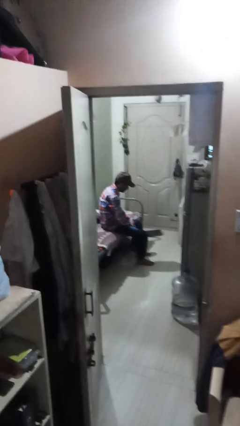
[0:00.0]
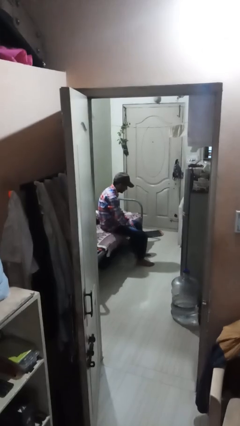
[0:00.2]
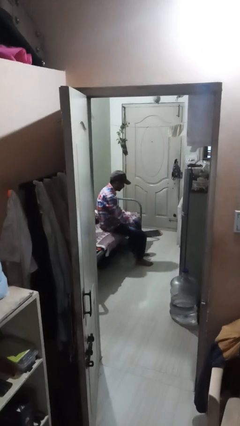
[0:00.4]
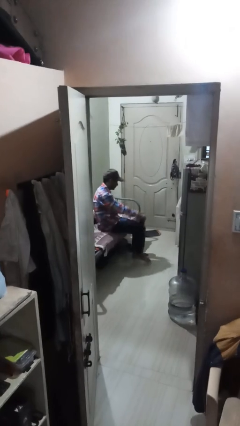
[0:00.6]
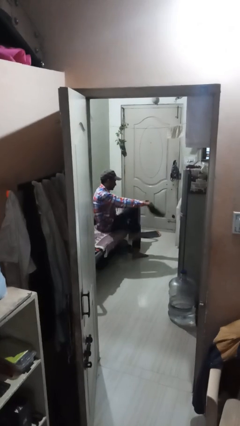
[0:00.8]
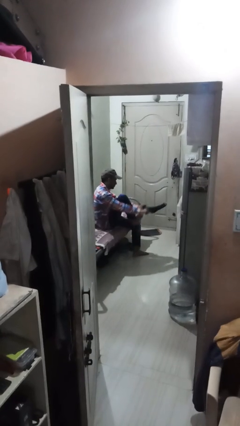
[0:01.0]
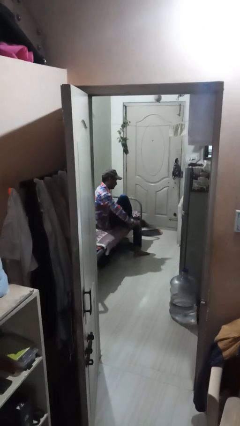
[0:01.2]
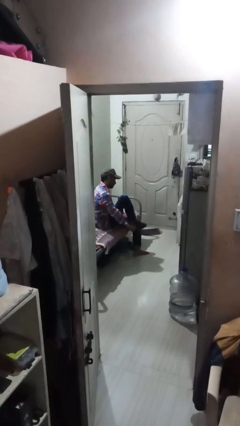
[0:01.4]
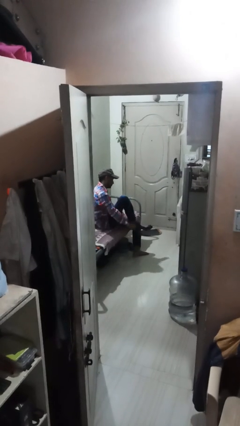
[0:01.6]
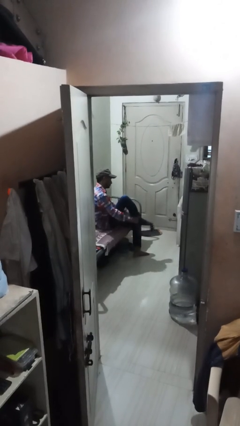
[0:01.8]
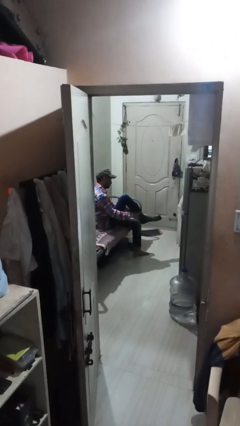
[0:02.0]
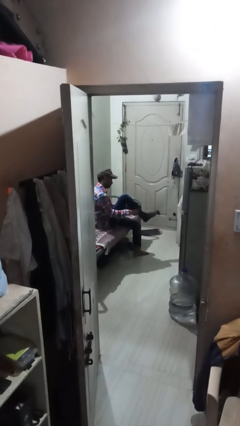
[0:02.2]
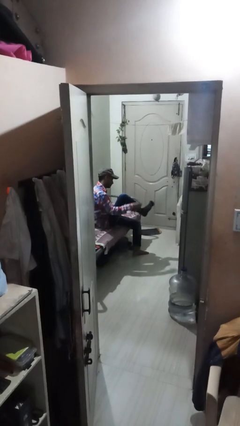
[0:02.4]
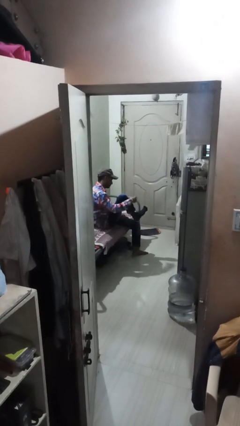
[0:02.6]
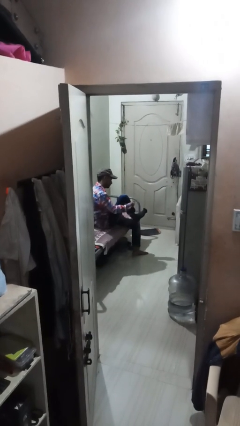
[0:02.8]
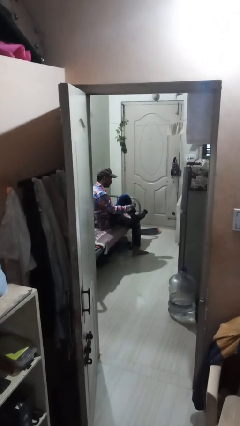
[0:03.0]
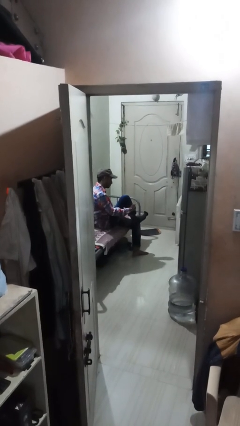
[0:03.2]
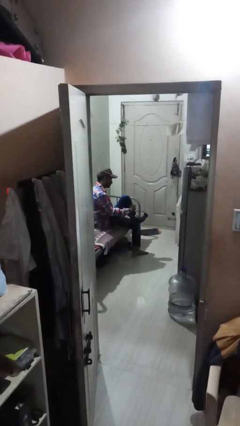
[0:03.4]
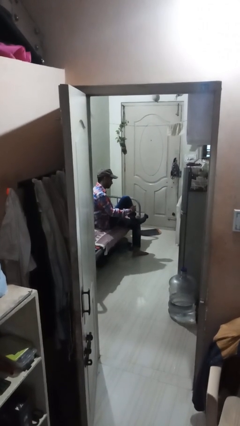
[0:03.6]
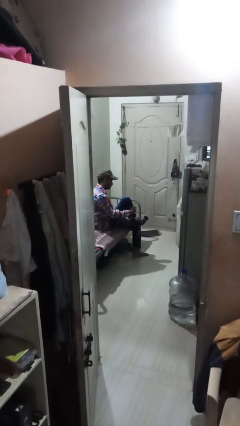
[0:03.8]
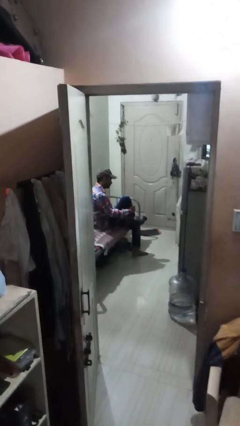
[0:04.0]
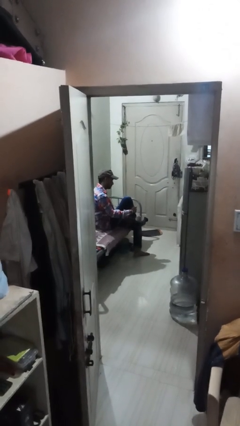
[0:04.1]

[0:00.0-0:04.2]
person puts on socks

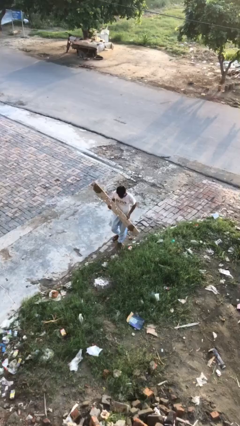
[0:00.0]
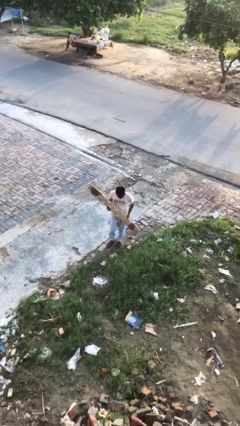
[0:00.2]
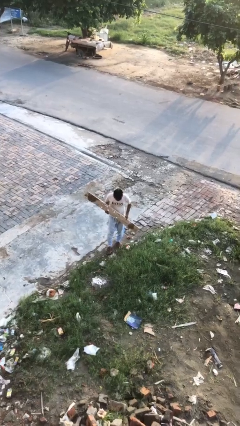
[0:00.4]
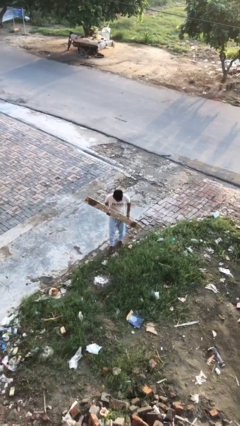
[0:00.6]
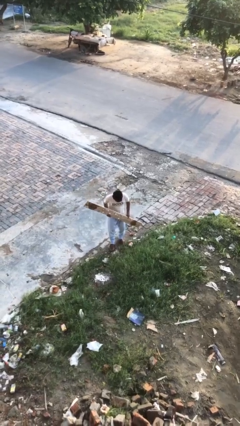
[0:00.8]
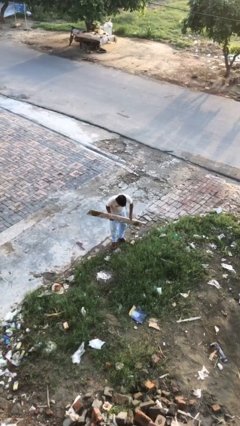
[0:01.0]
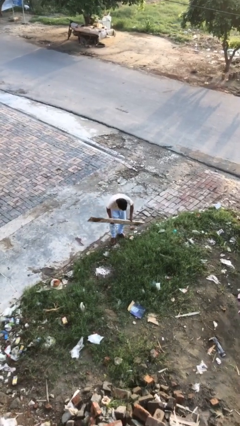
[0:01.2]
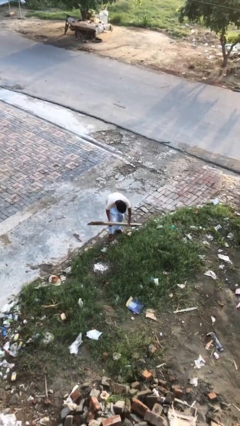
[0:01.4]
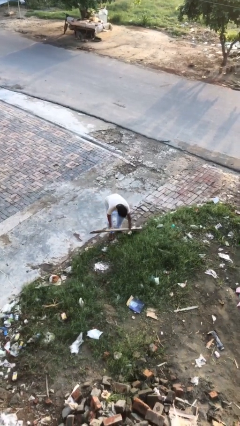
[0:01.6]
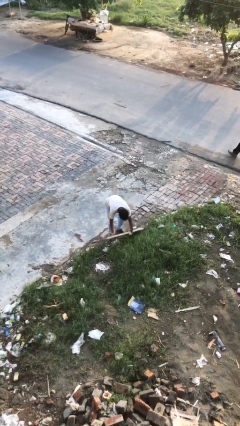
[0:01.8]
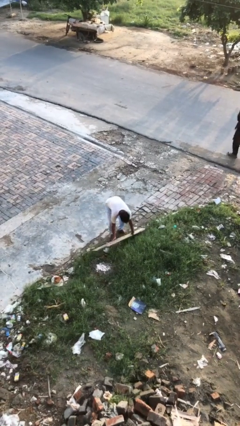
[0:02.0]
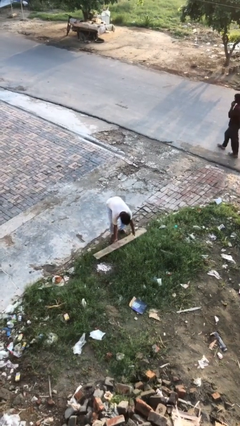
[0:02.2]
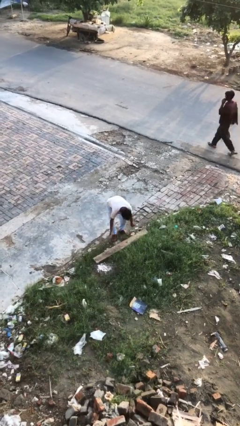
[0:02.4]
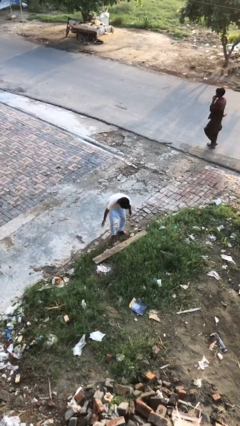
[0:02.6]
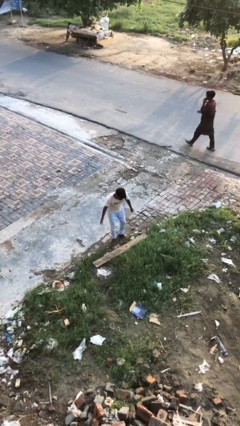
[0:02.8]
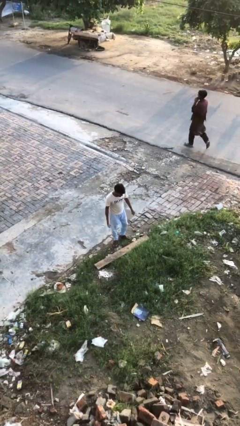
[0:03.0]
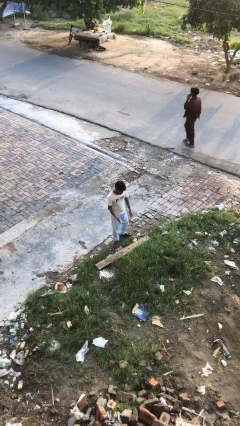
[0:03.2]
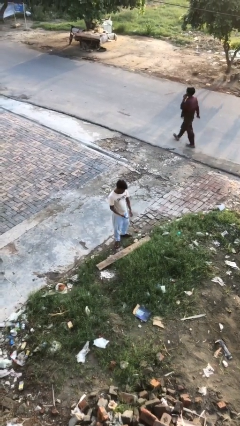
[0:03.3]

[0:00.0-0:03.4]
person puts down object on floor

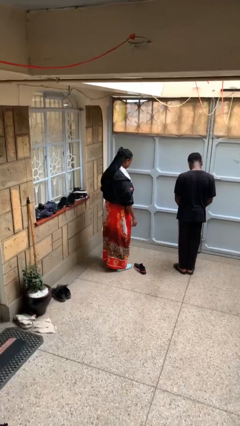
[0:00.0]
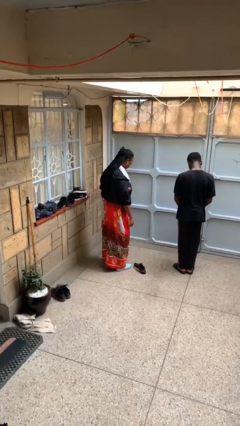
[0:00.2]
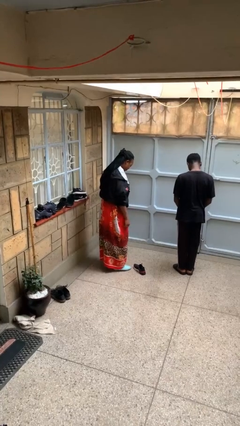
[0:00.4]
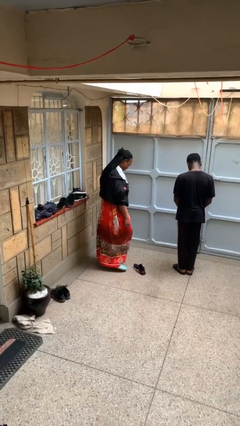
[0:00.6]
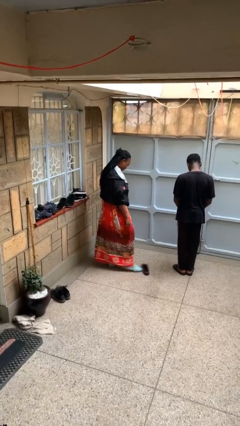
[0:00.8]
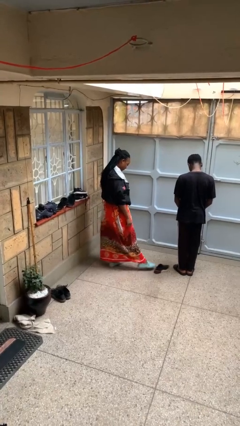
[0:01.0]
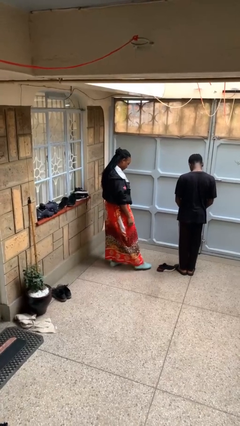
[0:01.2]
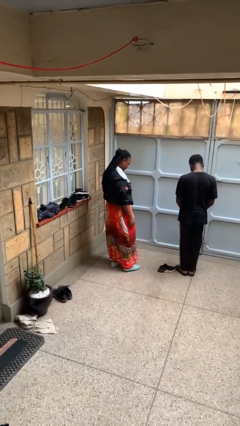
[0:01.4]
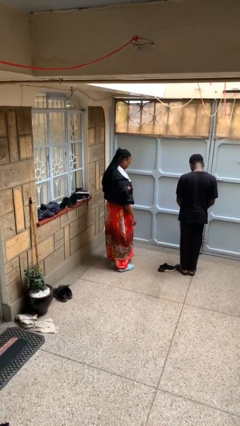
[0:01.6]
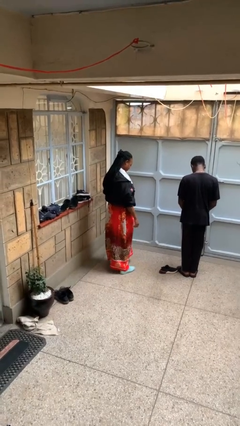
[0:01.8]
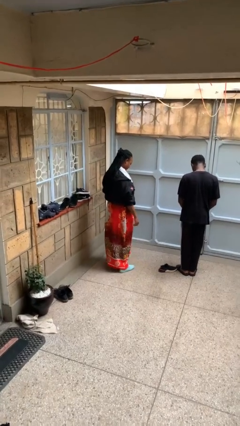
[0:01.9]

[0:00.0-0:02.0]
person kicks object to person

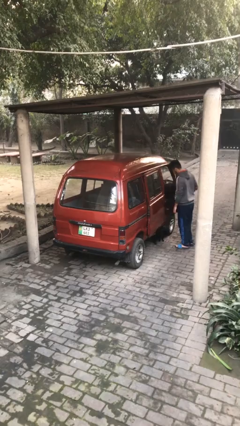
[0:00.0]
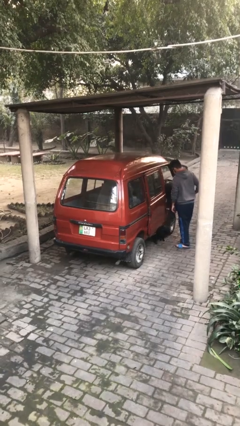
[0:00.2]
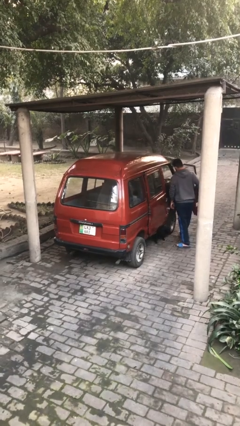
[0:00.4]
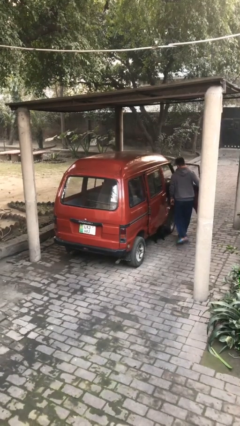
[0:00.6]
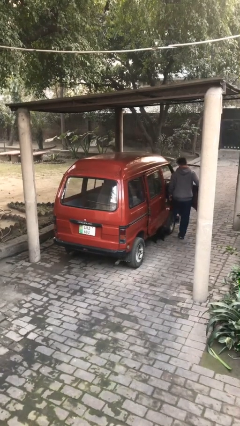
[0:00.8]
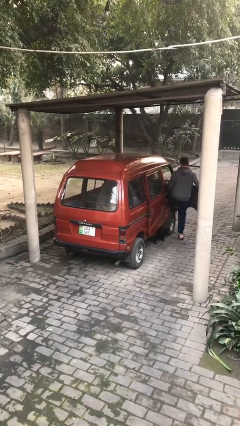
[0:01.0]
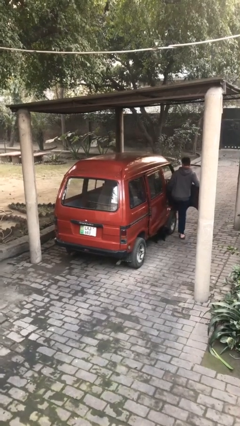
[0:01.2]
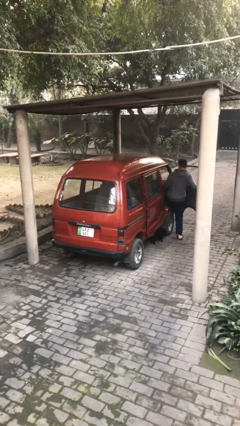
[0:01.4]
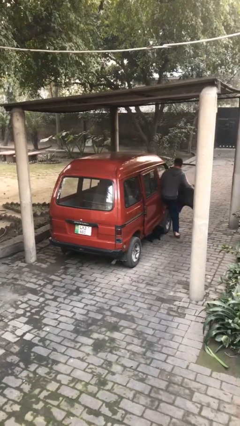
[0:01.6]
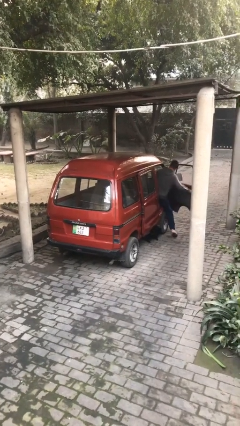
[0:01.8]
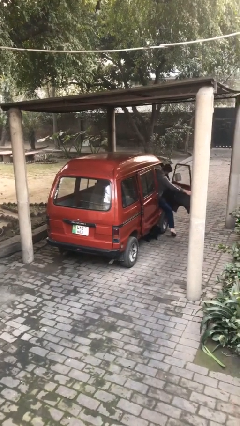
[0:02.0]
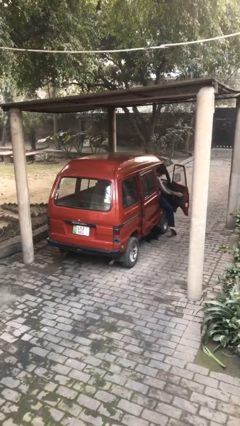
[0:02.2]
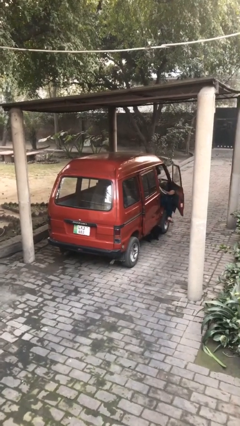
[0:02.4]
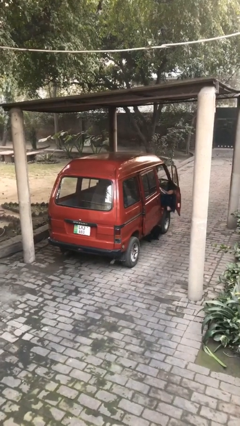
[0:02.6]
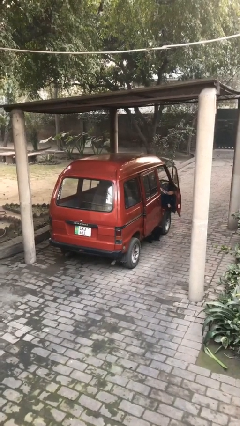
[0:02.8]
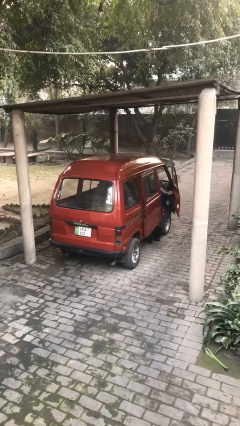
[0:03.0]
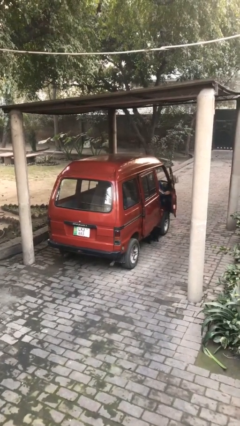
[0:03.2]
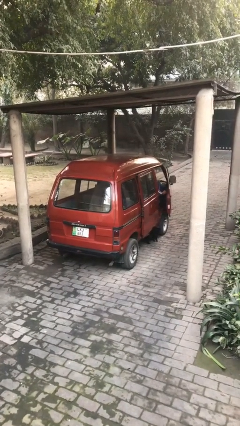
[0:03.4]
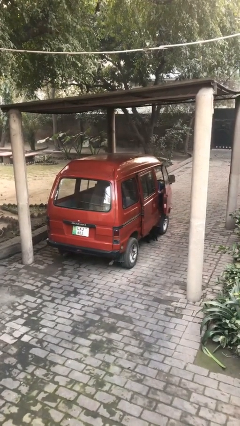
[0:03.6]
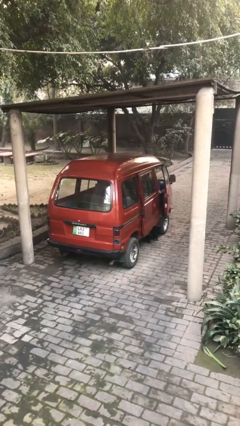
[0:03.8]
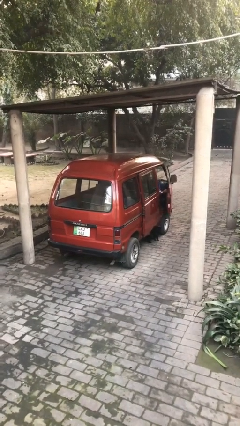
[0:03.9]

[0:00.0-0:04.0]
car picks up person

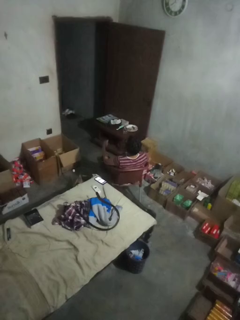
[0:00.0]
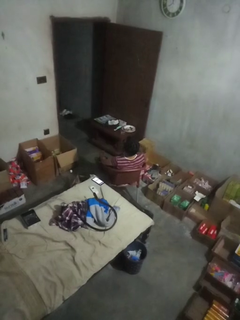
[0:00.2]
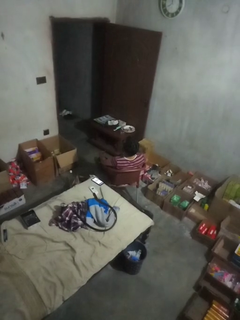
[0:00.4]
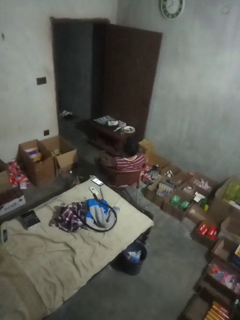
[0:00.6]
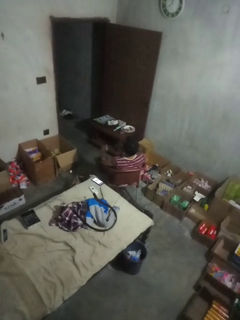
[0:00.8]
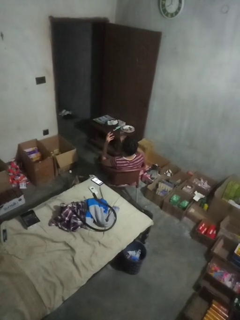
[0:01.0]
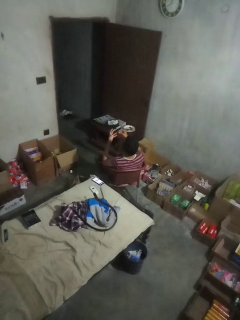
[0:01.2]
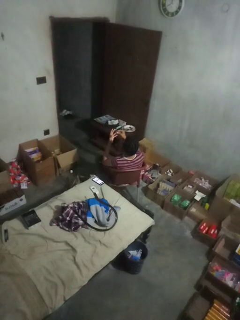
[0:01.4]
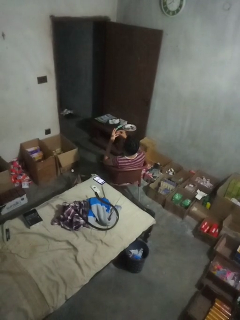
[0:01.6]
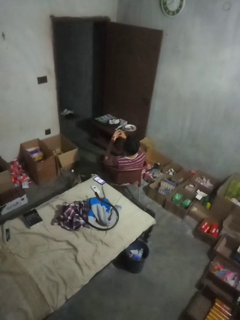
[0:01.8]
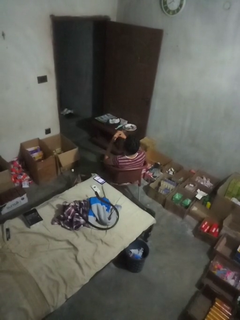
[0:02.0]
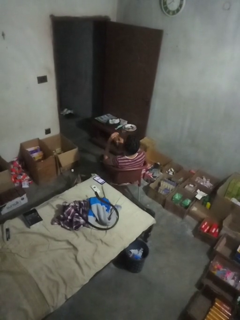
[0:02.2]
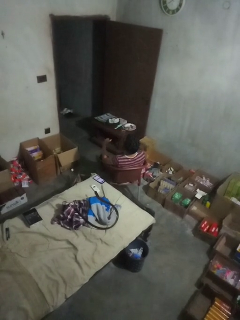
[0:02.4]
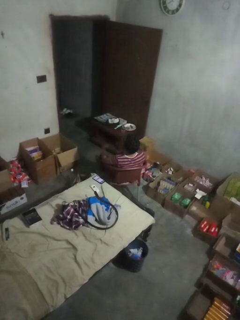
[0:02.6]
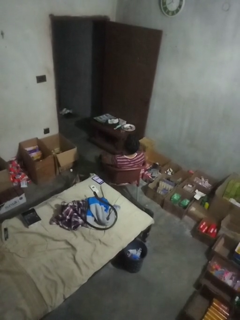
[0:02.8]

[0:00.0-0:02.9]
person puts on ring

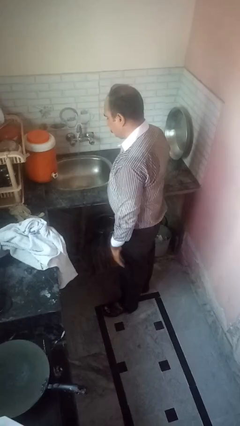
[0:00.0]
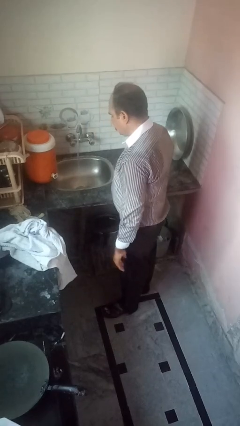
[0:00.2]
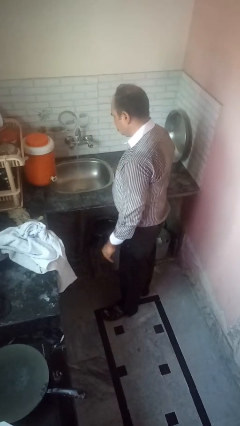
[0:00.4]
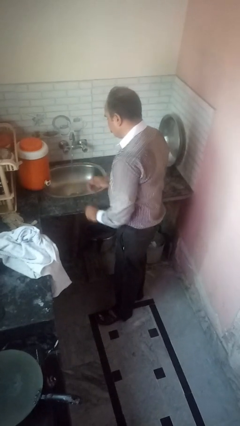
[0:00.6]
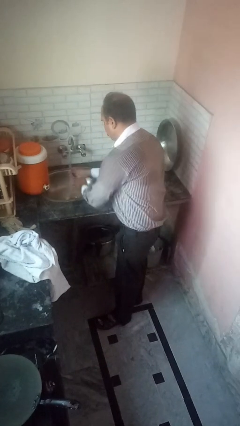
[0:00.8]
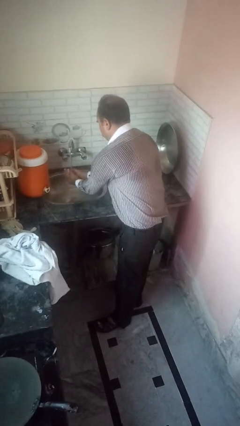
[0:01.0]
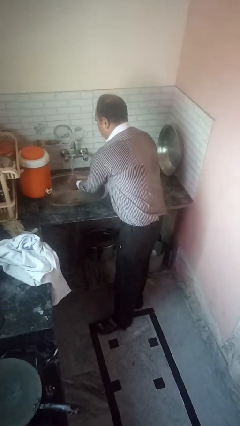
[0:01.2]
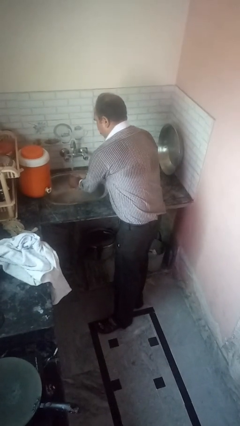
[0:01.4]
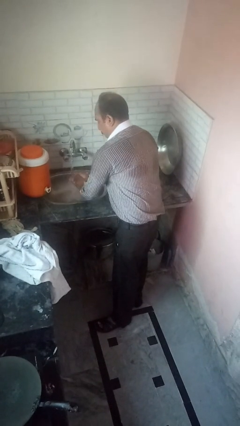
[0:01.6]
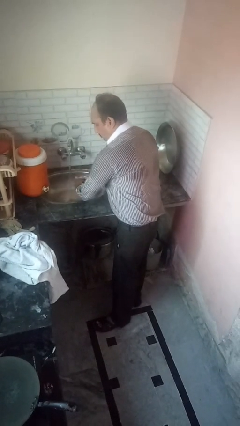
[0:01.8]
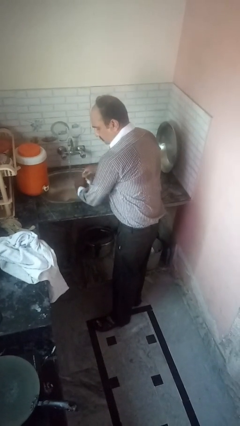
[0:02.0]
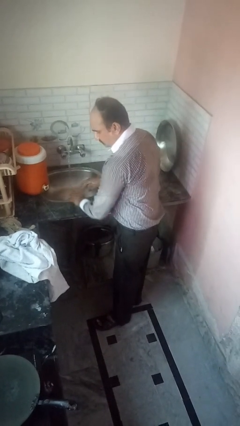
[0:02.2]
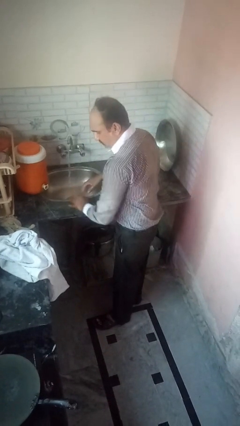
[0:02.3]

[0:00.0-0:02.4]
person washes hands
